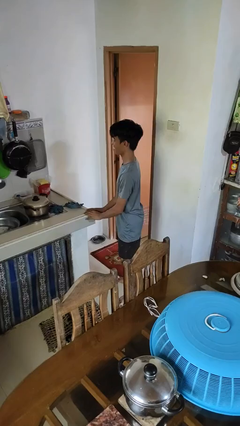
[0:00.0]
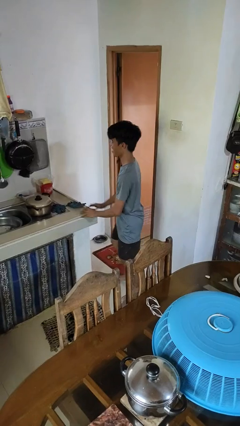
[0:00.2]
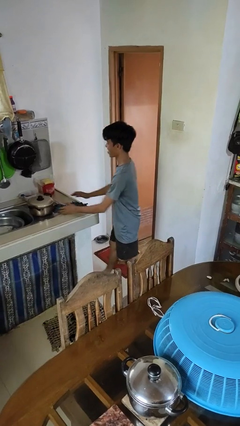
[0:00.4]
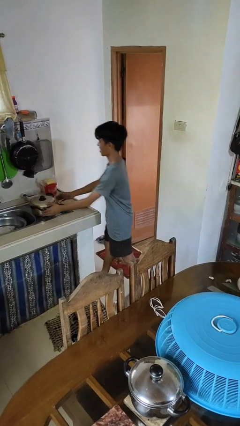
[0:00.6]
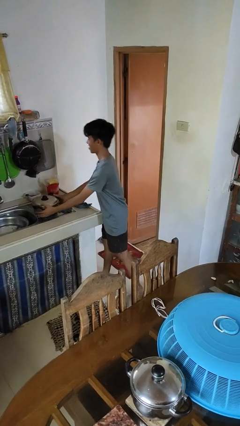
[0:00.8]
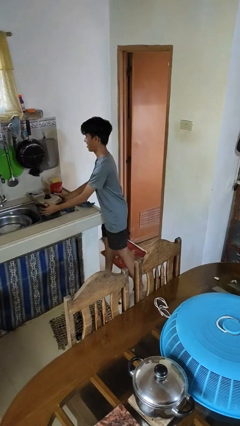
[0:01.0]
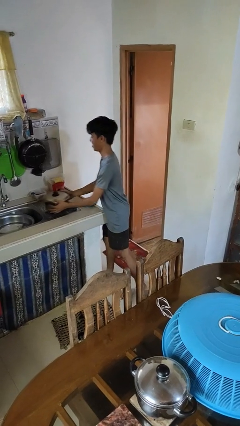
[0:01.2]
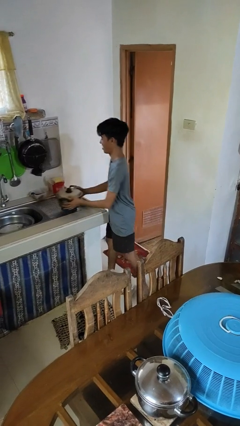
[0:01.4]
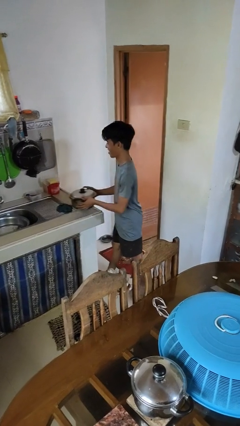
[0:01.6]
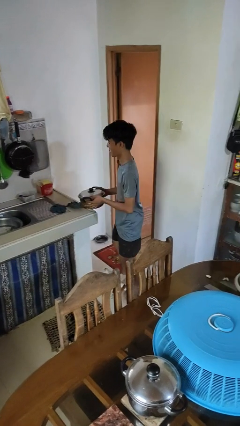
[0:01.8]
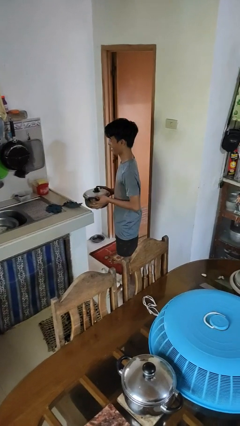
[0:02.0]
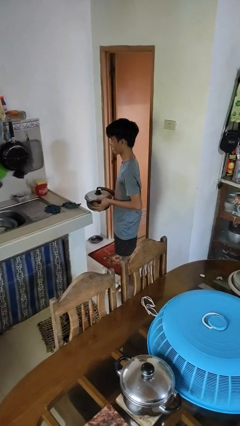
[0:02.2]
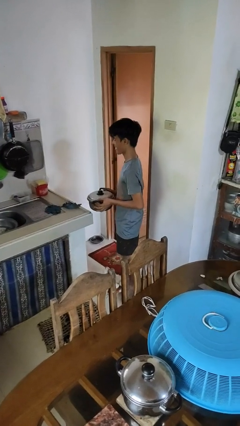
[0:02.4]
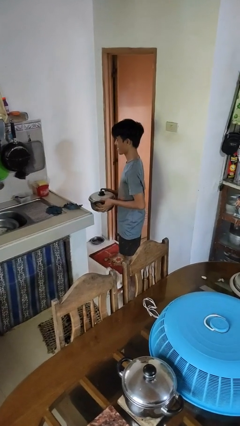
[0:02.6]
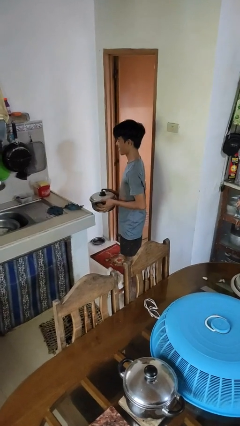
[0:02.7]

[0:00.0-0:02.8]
person picks up object from countertop

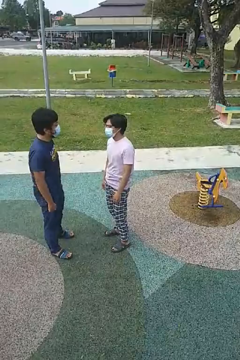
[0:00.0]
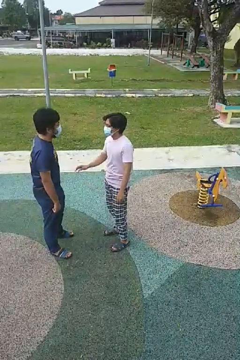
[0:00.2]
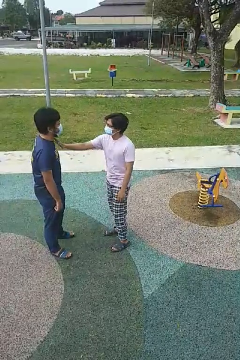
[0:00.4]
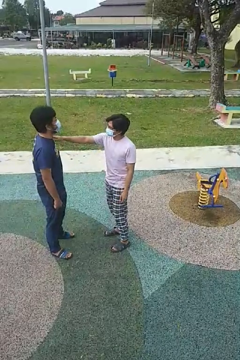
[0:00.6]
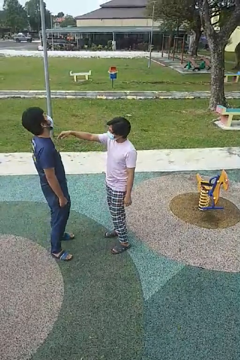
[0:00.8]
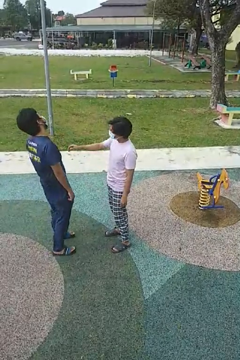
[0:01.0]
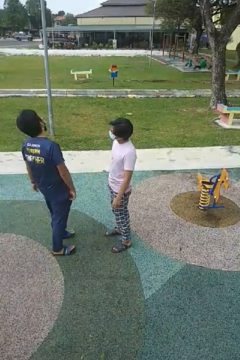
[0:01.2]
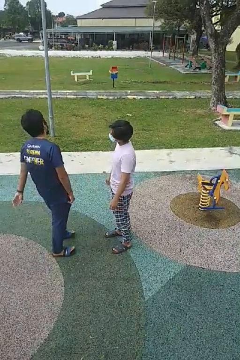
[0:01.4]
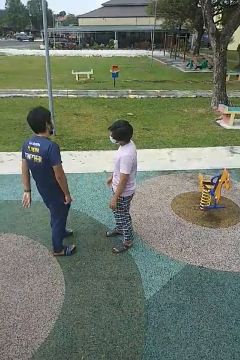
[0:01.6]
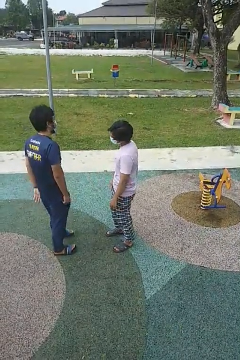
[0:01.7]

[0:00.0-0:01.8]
person shoves person

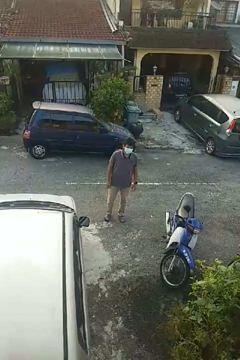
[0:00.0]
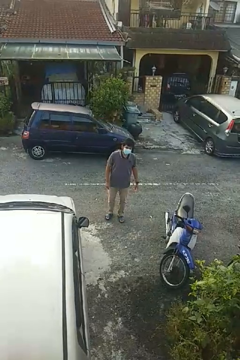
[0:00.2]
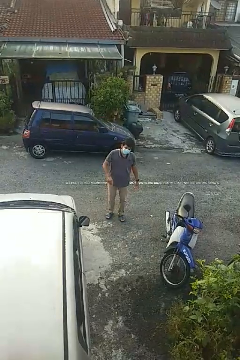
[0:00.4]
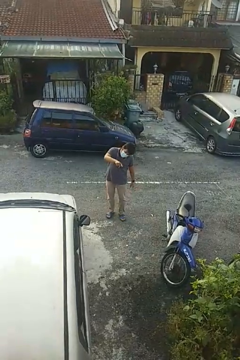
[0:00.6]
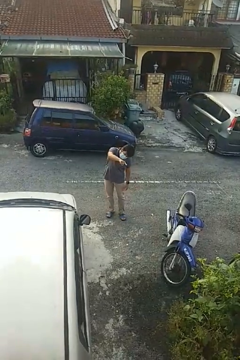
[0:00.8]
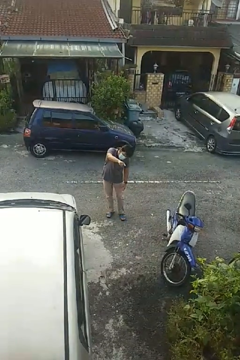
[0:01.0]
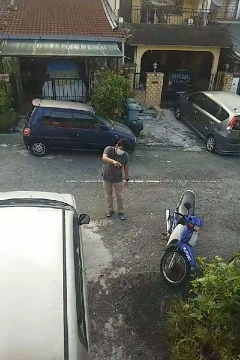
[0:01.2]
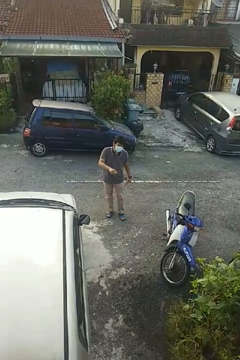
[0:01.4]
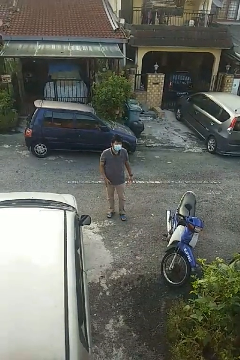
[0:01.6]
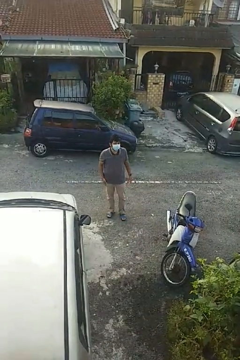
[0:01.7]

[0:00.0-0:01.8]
person points at person

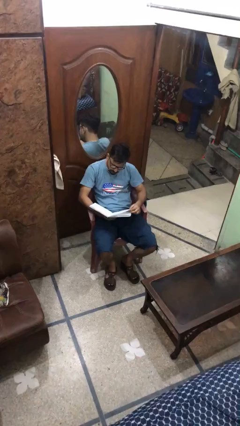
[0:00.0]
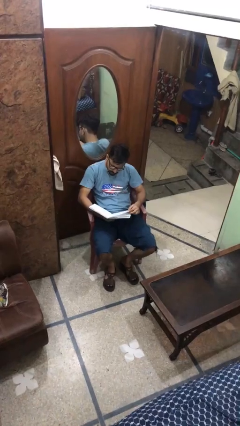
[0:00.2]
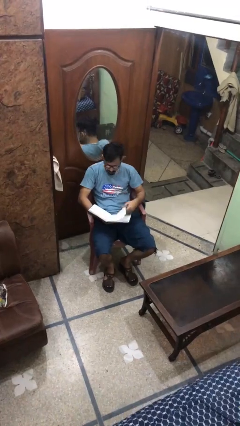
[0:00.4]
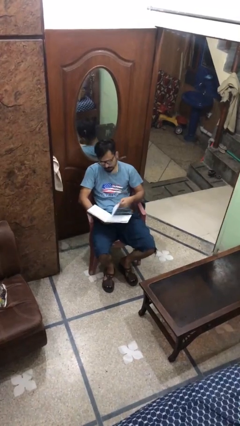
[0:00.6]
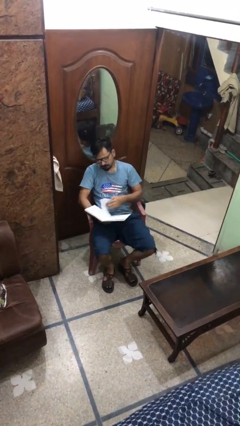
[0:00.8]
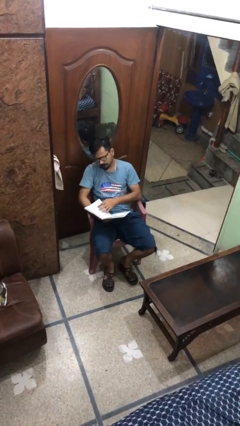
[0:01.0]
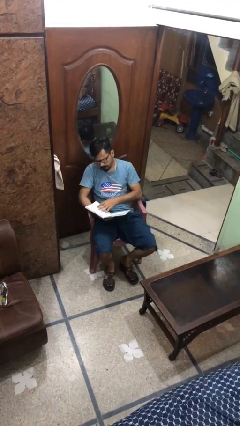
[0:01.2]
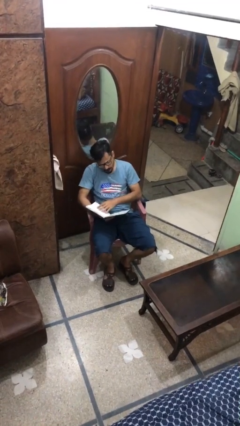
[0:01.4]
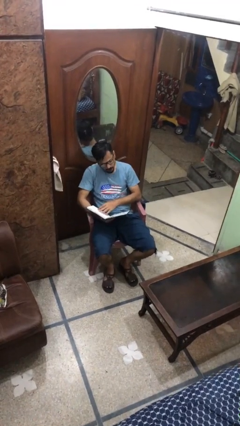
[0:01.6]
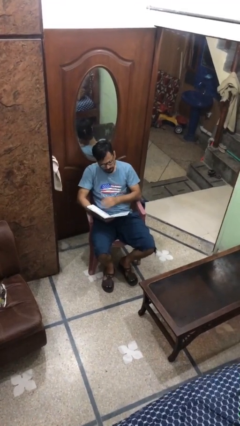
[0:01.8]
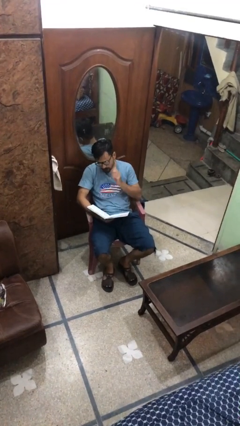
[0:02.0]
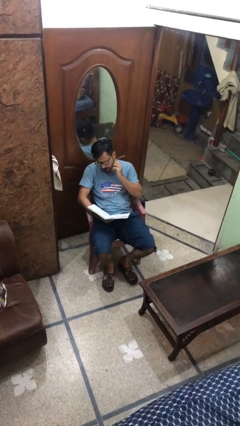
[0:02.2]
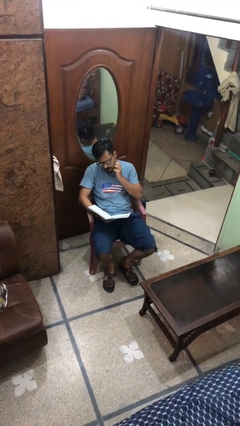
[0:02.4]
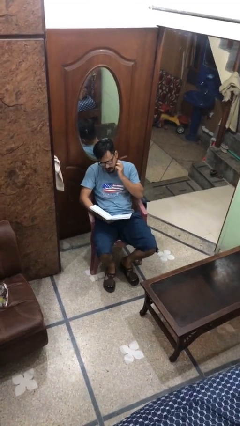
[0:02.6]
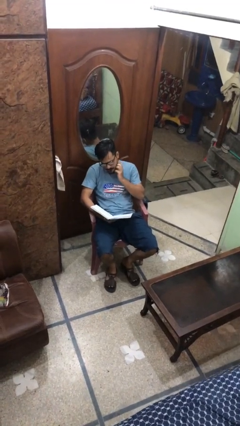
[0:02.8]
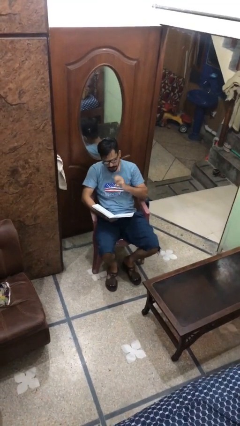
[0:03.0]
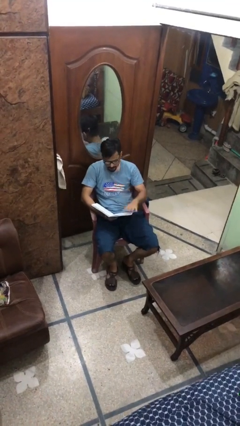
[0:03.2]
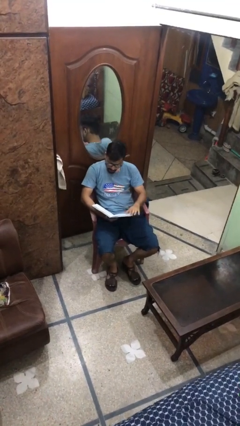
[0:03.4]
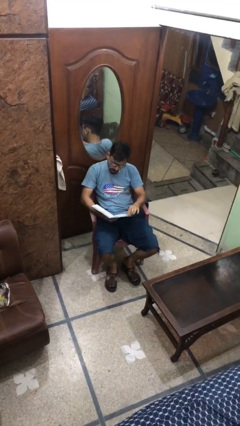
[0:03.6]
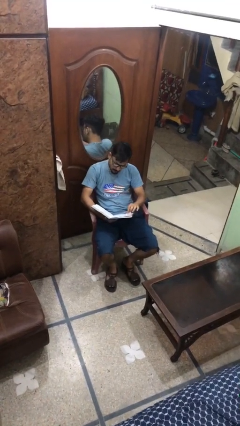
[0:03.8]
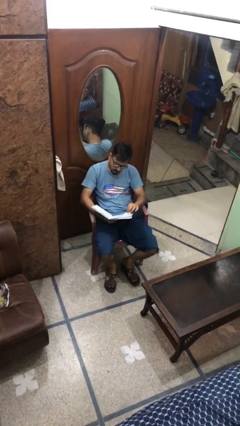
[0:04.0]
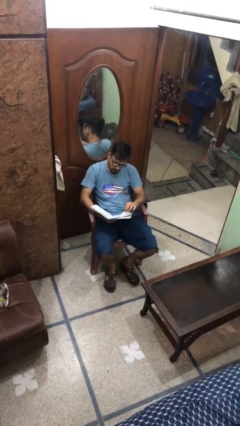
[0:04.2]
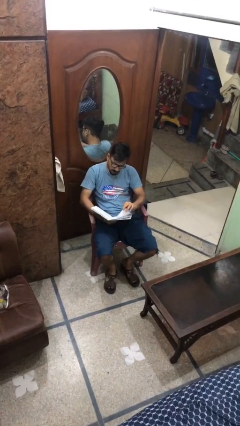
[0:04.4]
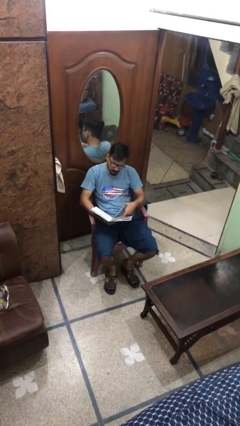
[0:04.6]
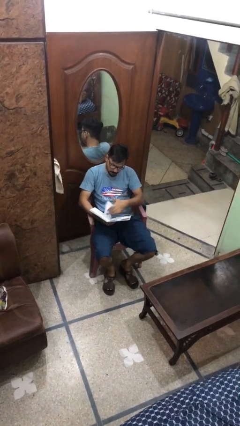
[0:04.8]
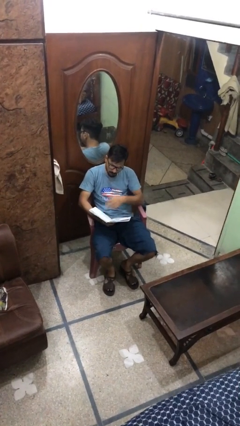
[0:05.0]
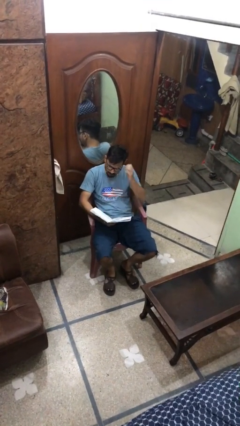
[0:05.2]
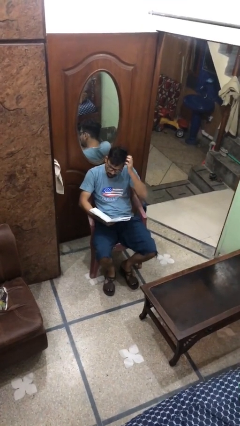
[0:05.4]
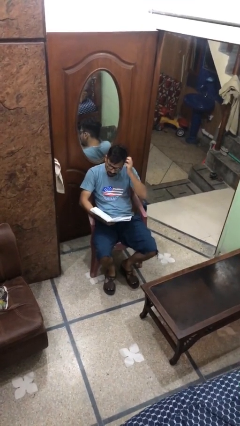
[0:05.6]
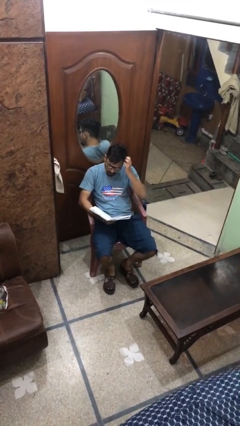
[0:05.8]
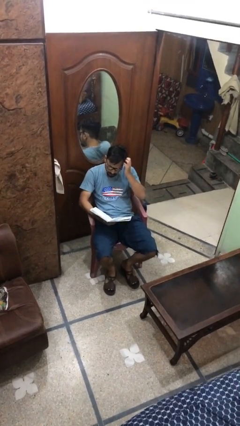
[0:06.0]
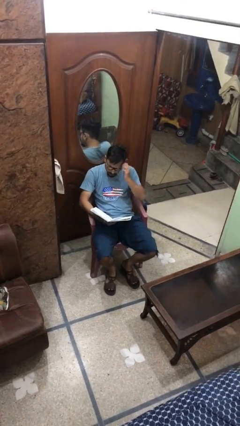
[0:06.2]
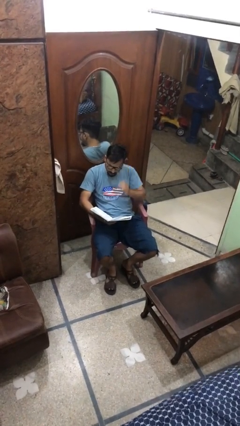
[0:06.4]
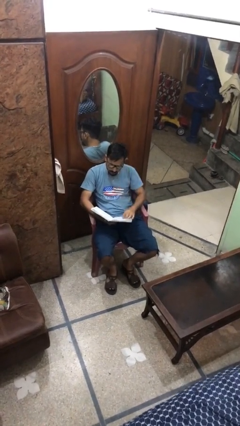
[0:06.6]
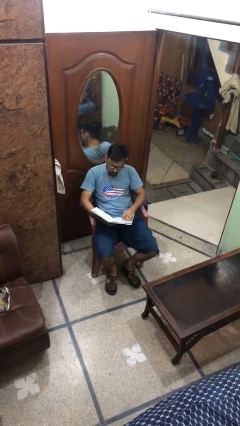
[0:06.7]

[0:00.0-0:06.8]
person reads document

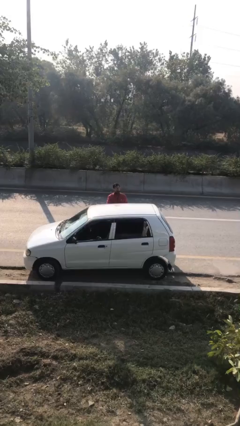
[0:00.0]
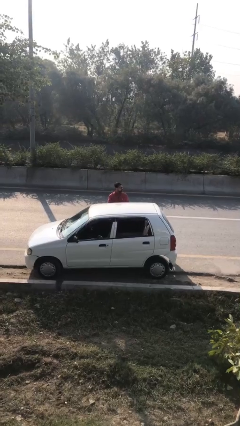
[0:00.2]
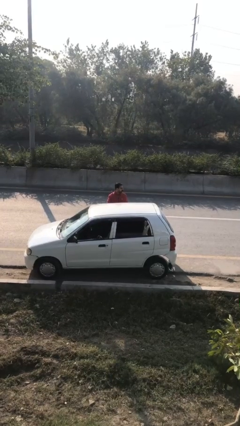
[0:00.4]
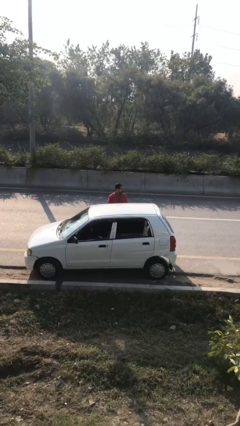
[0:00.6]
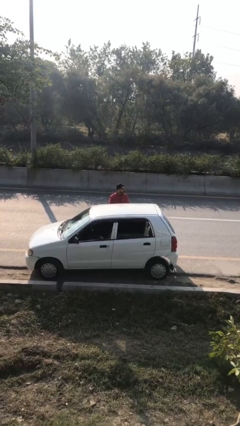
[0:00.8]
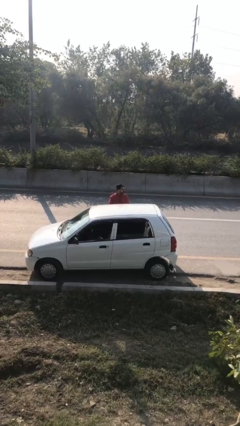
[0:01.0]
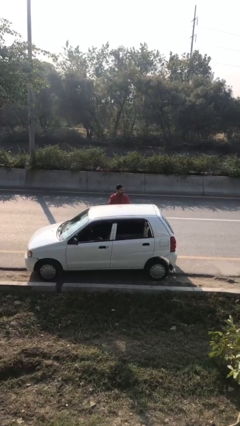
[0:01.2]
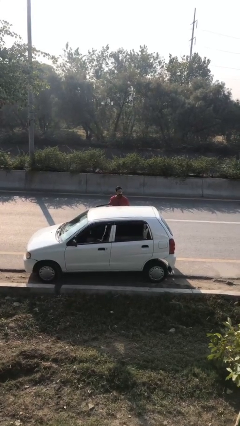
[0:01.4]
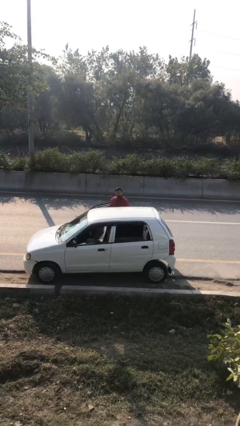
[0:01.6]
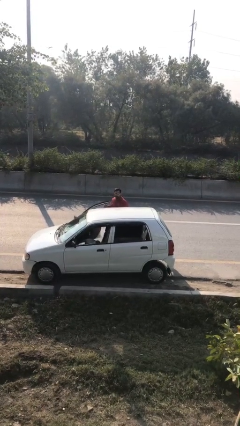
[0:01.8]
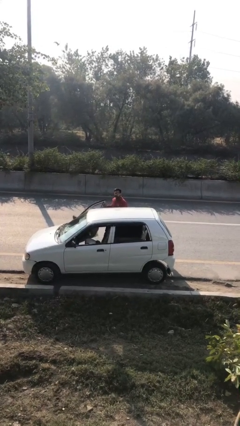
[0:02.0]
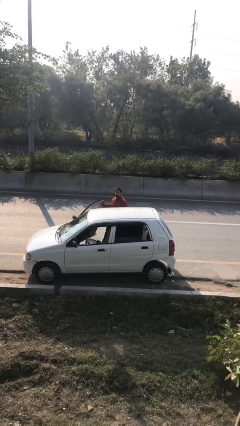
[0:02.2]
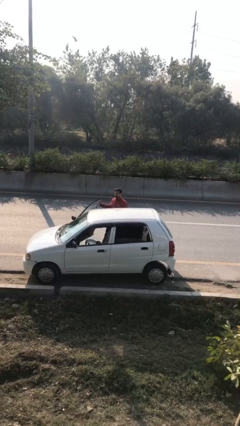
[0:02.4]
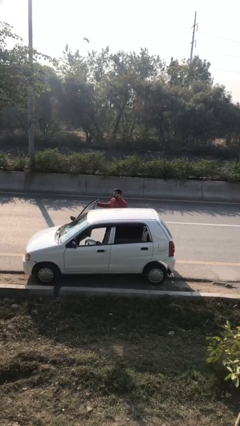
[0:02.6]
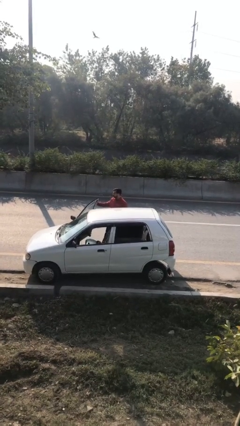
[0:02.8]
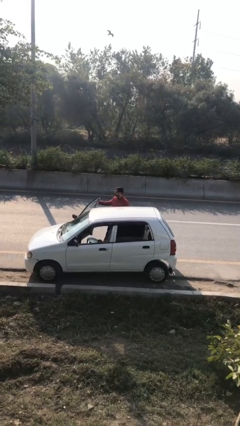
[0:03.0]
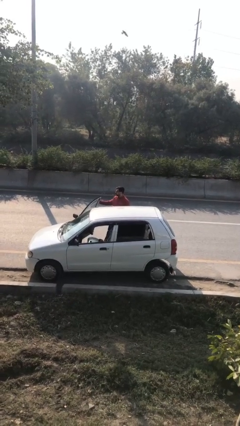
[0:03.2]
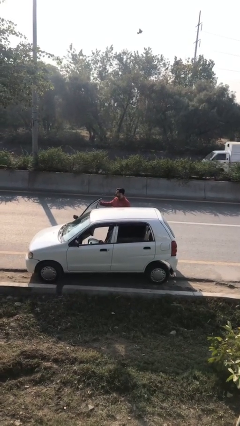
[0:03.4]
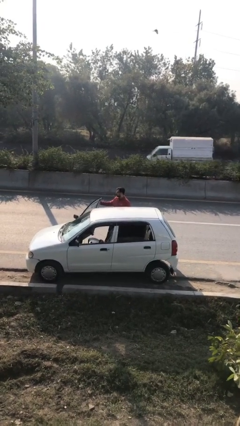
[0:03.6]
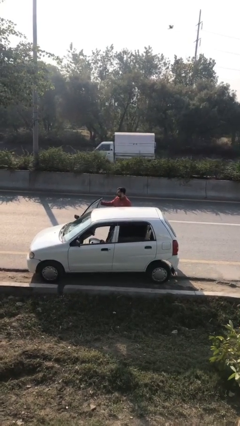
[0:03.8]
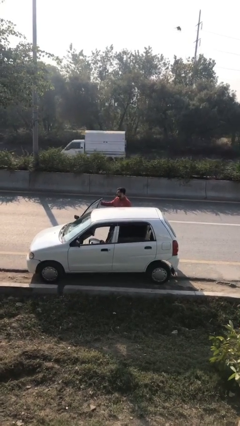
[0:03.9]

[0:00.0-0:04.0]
person opens car door

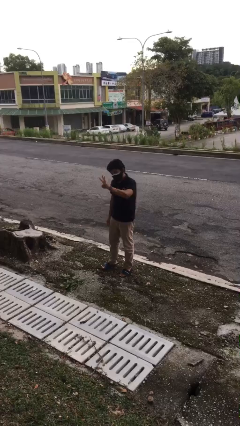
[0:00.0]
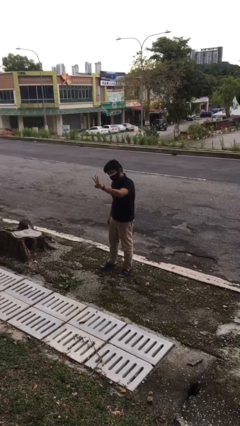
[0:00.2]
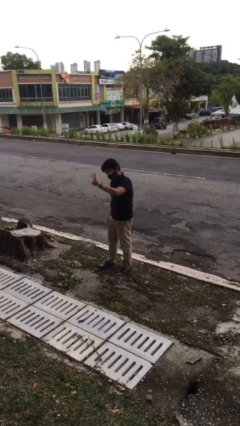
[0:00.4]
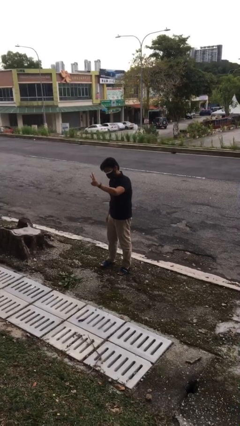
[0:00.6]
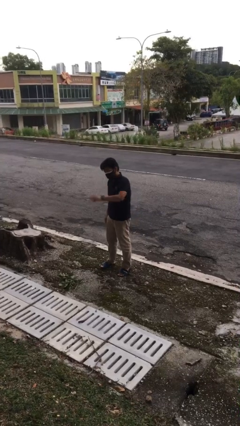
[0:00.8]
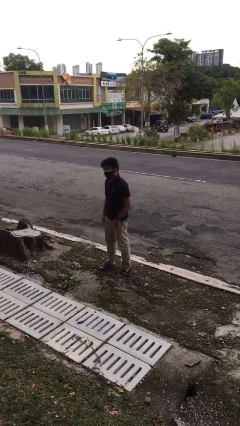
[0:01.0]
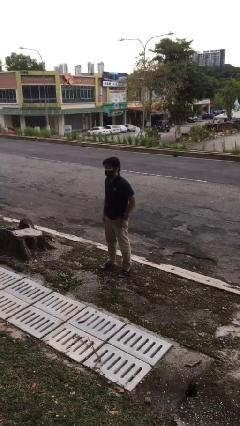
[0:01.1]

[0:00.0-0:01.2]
person gestures number three
